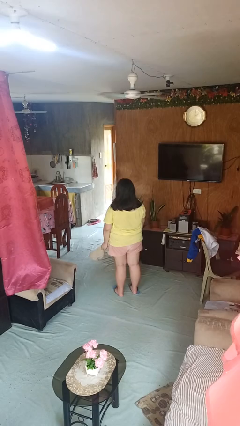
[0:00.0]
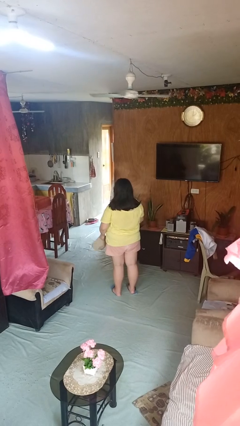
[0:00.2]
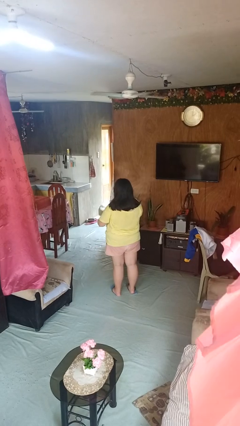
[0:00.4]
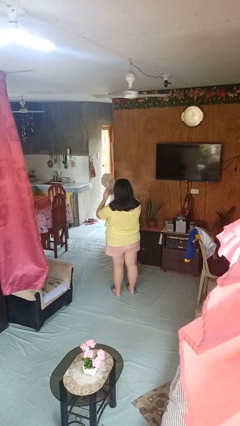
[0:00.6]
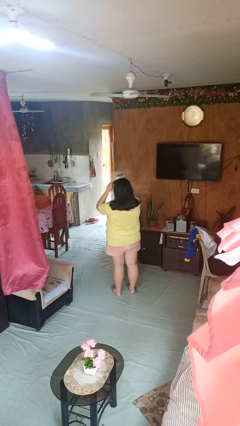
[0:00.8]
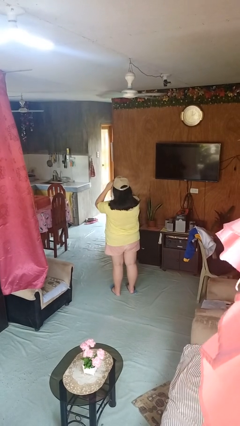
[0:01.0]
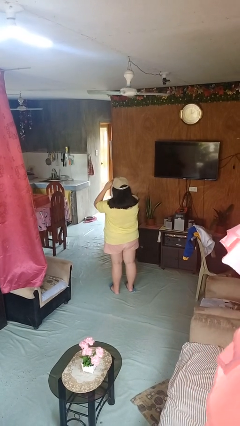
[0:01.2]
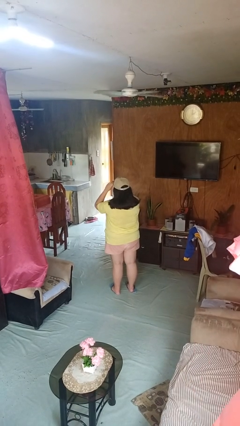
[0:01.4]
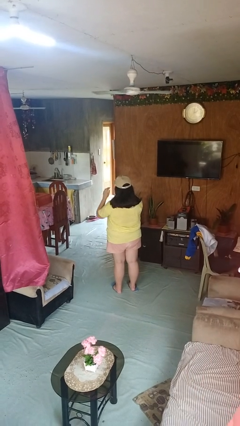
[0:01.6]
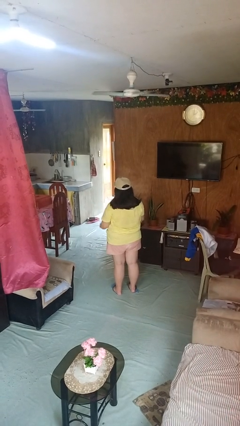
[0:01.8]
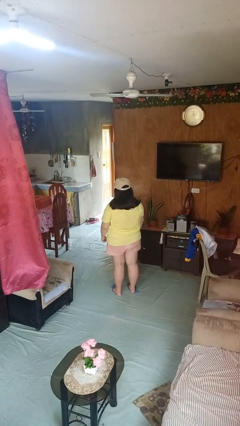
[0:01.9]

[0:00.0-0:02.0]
person puts on hat

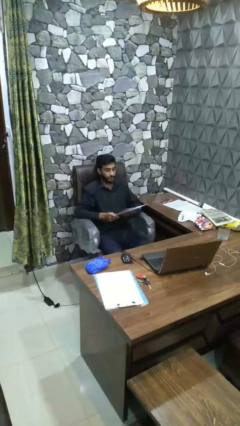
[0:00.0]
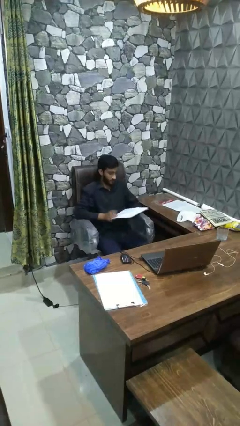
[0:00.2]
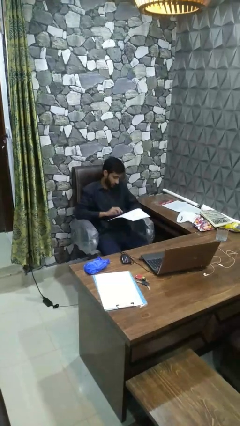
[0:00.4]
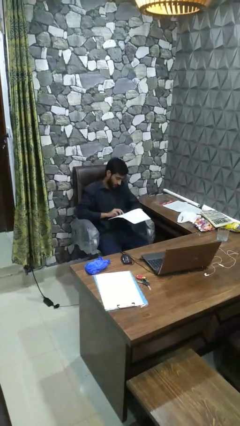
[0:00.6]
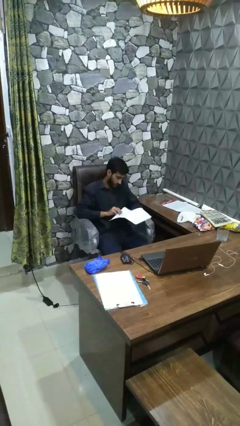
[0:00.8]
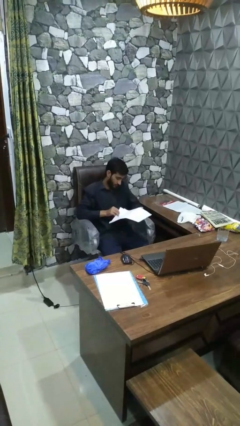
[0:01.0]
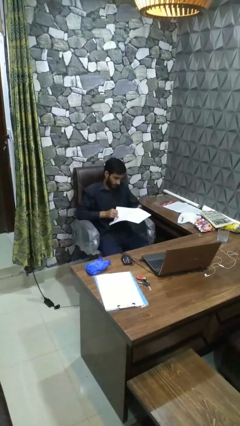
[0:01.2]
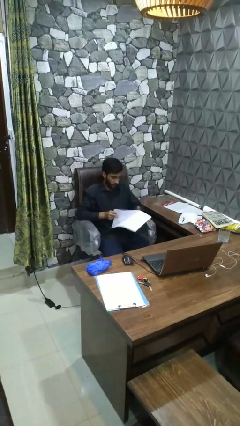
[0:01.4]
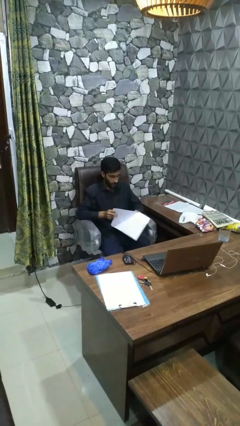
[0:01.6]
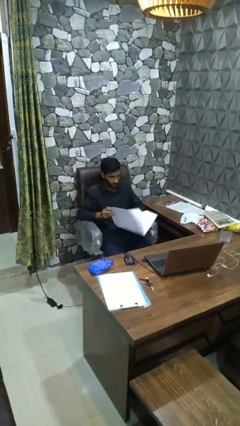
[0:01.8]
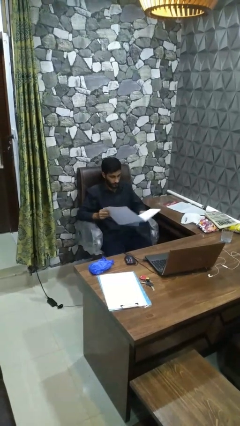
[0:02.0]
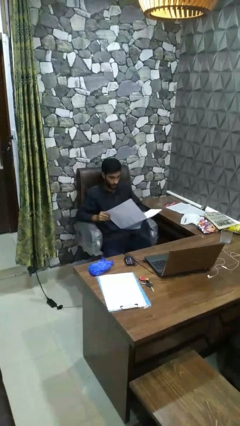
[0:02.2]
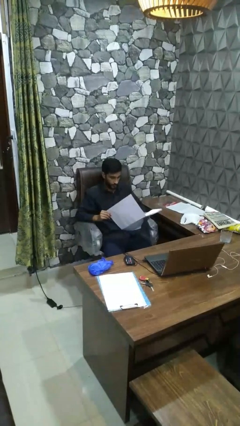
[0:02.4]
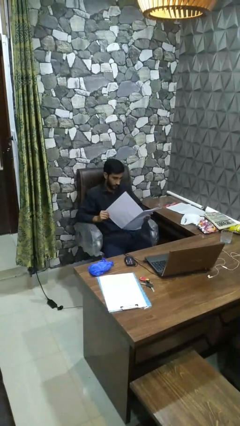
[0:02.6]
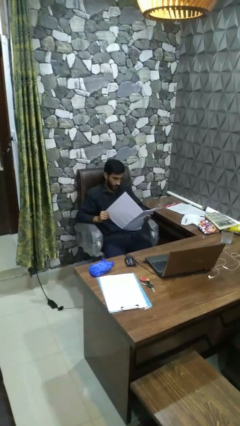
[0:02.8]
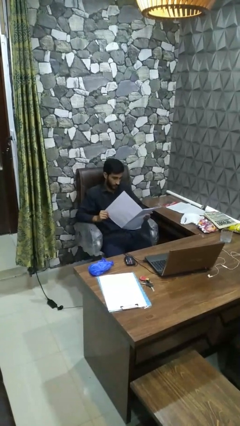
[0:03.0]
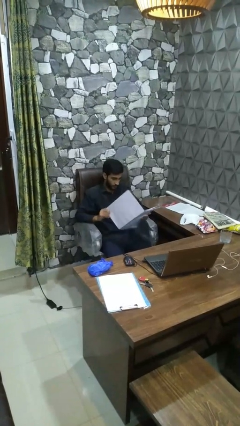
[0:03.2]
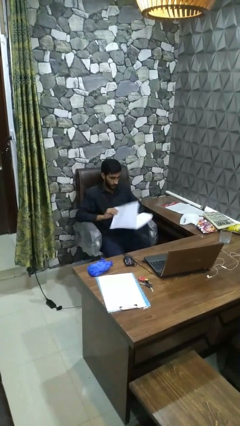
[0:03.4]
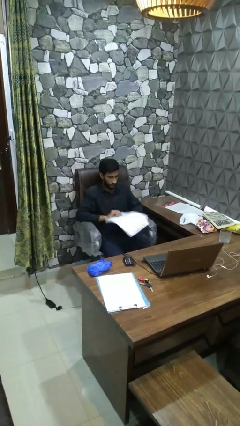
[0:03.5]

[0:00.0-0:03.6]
person reads magazine

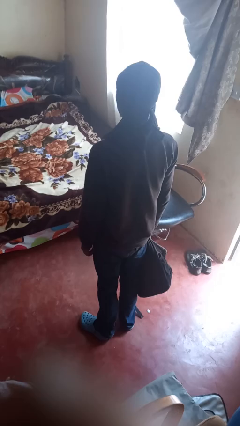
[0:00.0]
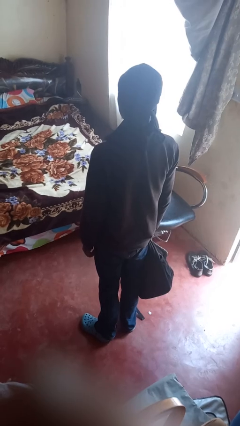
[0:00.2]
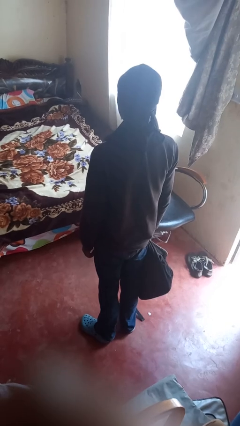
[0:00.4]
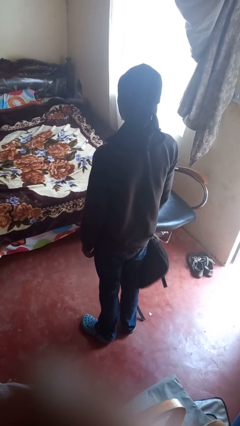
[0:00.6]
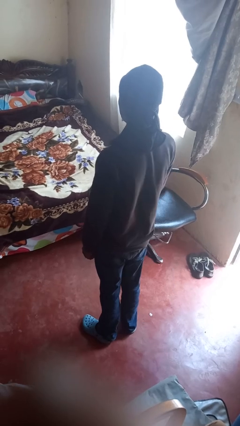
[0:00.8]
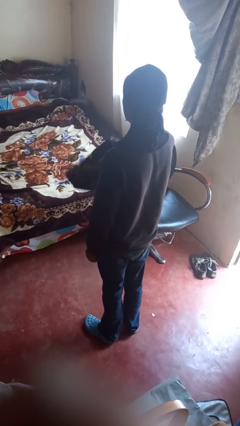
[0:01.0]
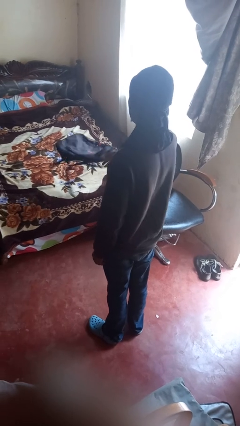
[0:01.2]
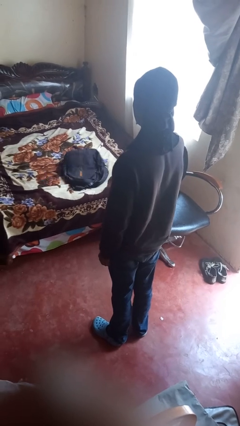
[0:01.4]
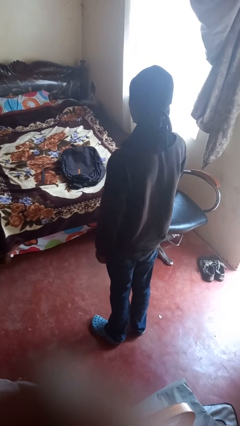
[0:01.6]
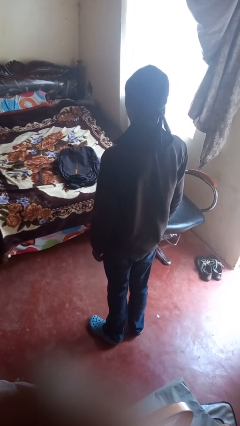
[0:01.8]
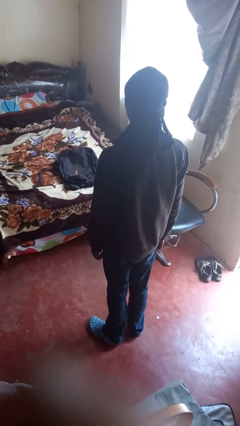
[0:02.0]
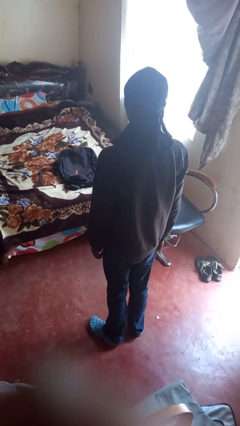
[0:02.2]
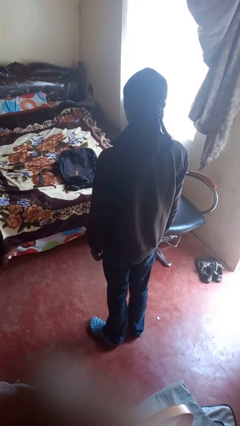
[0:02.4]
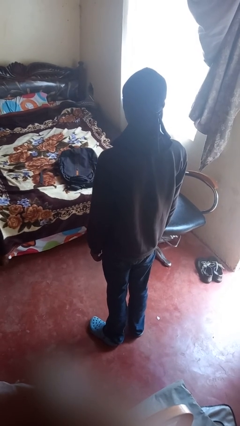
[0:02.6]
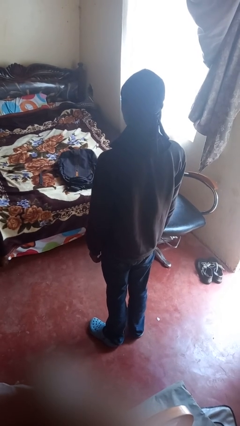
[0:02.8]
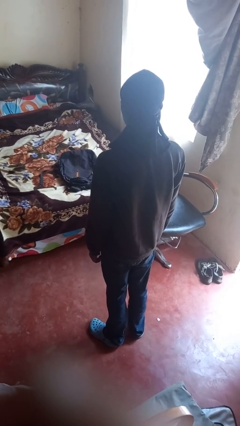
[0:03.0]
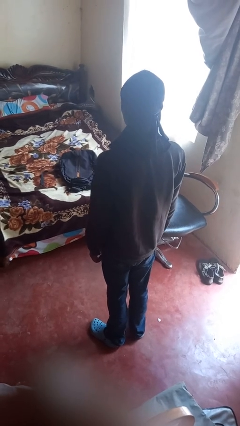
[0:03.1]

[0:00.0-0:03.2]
person throws object on bed

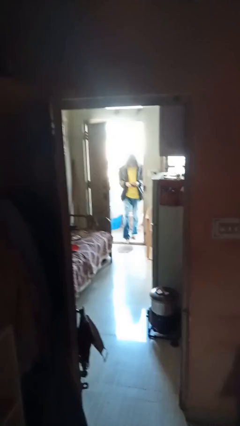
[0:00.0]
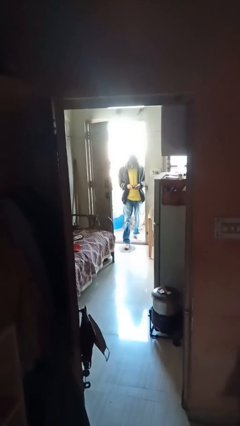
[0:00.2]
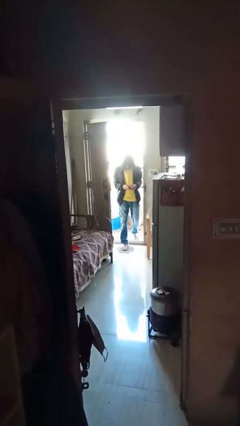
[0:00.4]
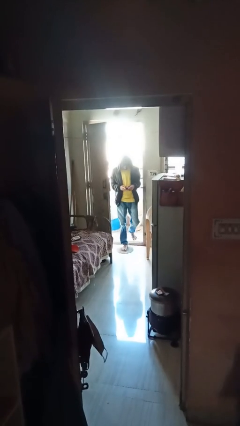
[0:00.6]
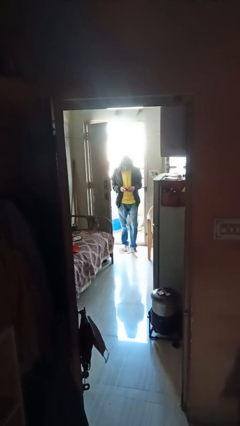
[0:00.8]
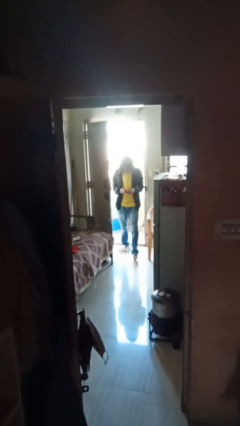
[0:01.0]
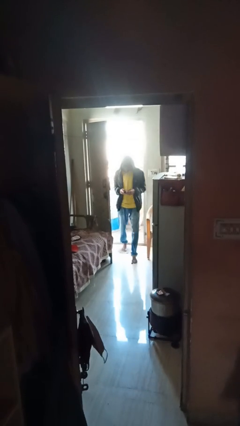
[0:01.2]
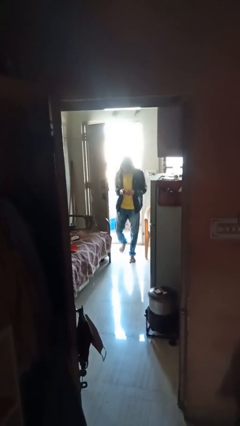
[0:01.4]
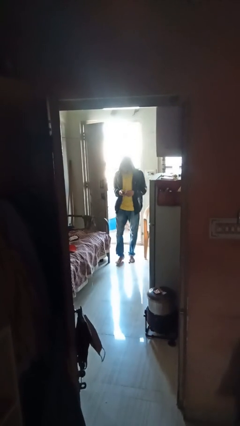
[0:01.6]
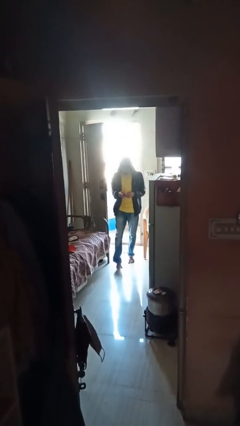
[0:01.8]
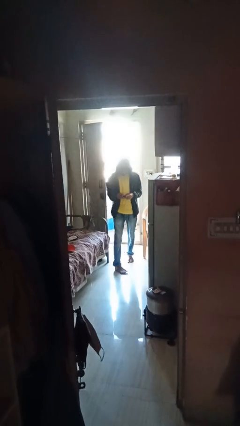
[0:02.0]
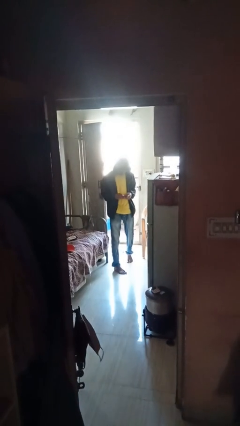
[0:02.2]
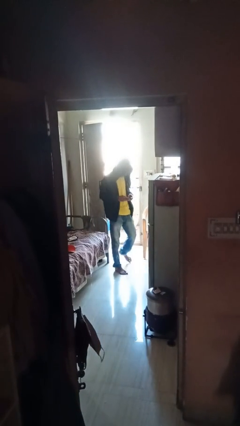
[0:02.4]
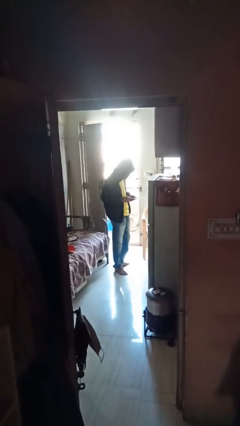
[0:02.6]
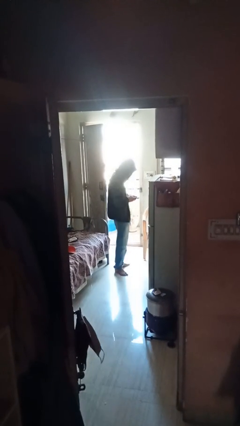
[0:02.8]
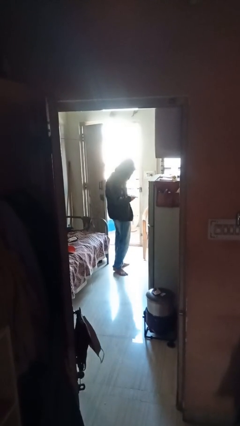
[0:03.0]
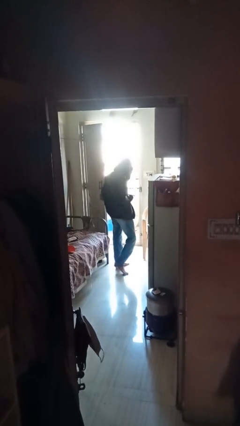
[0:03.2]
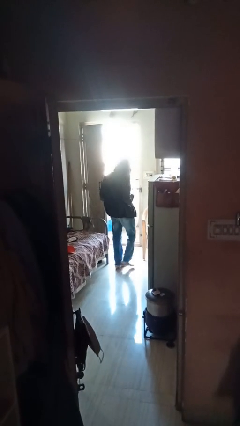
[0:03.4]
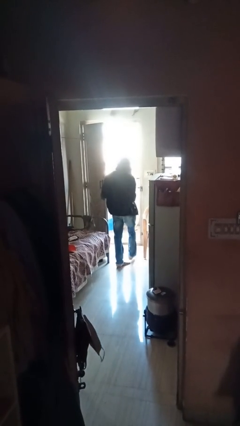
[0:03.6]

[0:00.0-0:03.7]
person enters scene through structure

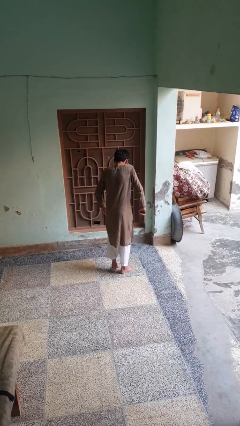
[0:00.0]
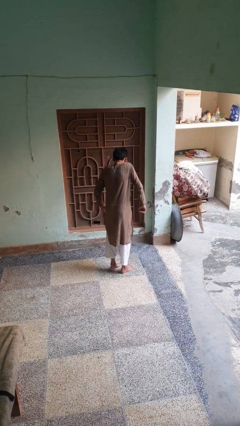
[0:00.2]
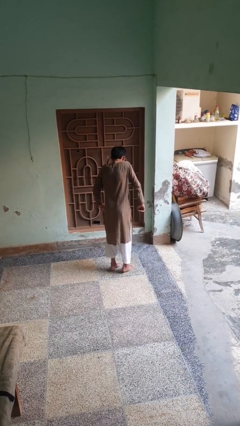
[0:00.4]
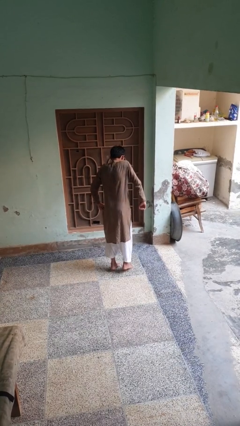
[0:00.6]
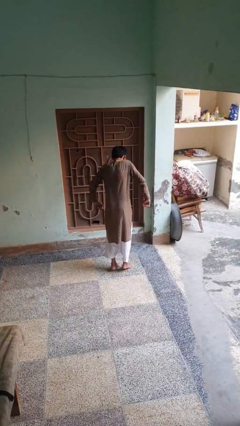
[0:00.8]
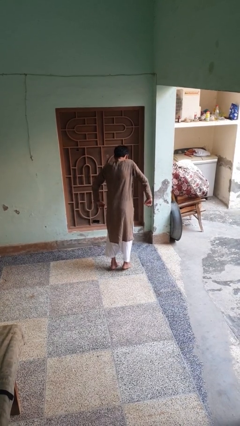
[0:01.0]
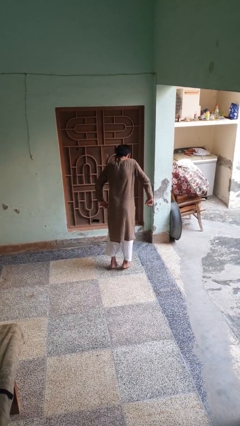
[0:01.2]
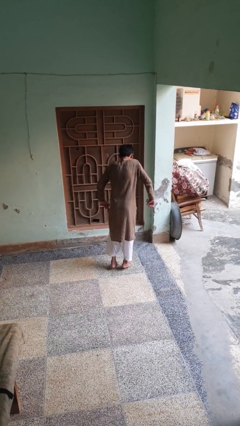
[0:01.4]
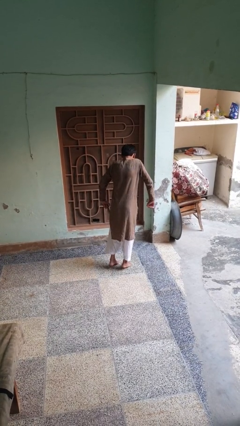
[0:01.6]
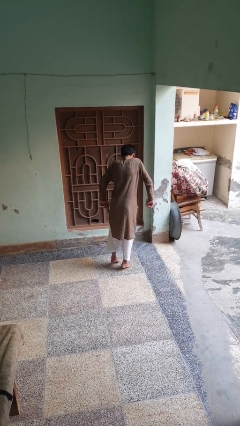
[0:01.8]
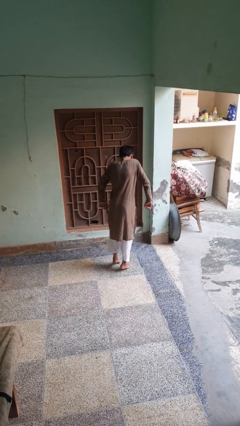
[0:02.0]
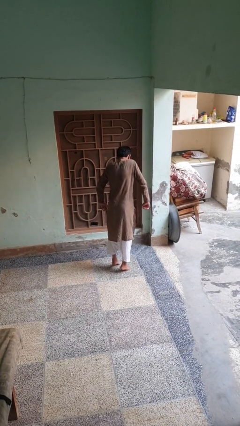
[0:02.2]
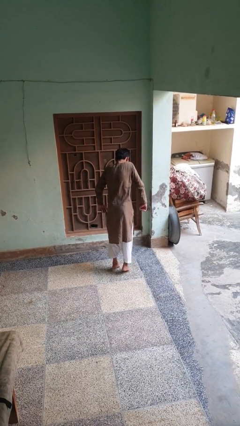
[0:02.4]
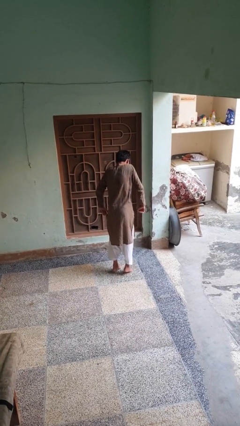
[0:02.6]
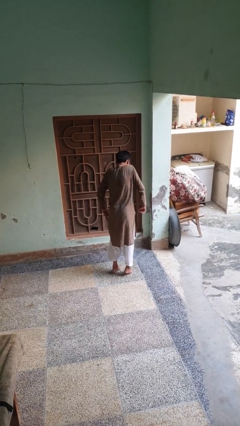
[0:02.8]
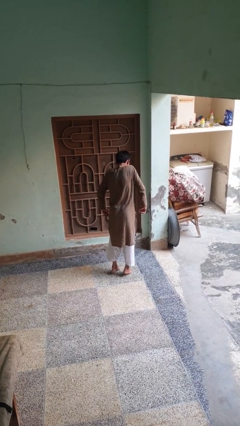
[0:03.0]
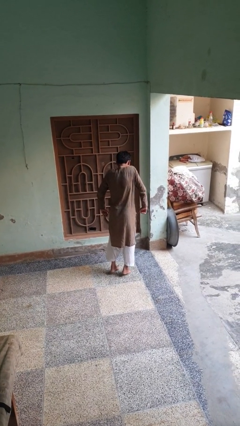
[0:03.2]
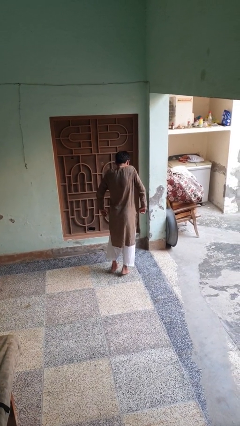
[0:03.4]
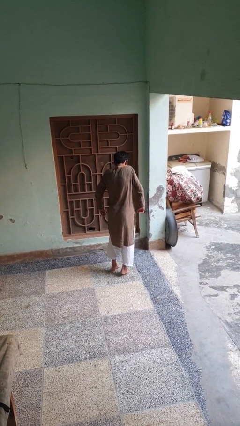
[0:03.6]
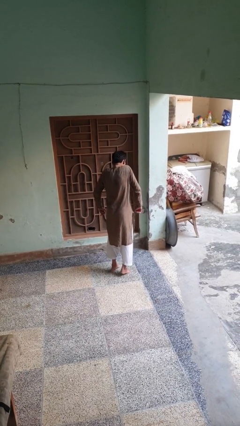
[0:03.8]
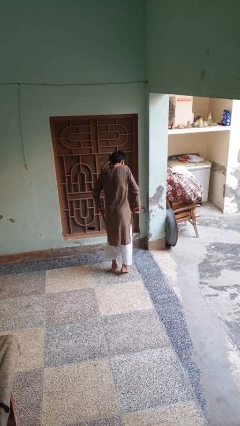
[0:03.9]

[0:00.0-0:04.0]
person walks tiptoe

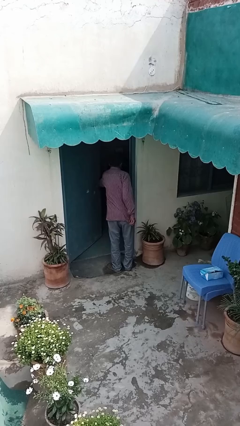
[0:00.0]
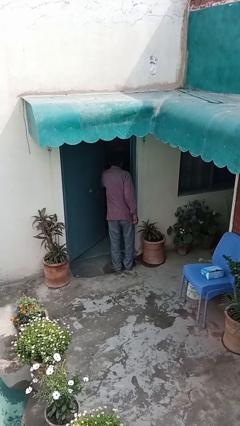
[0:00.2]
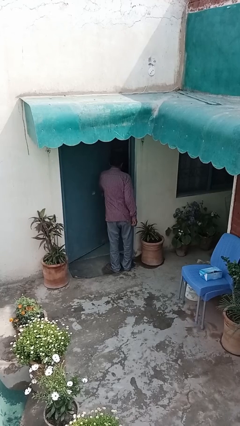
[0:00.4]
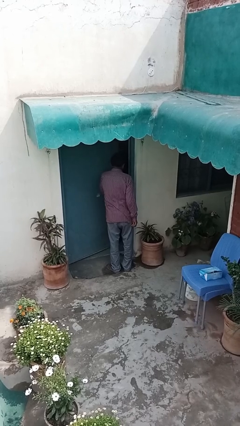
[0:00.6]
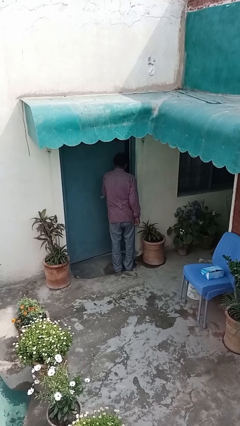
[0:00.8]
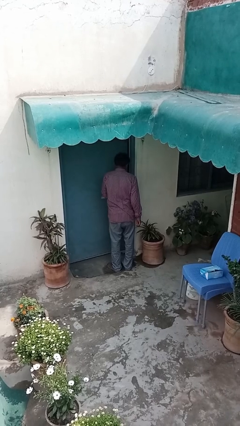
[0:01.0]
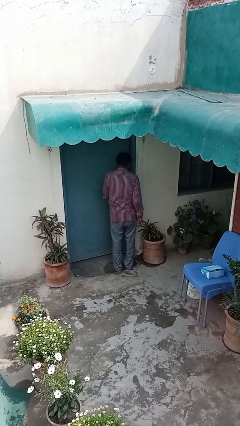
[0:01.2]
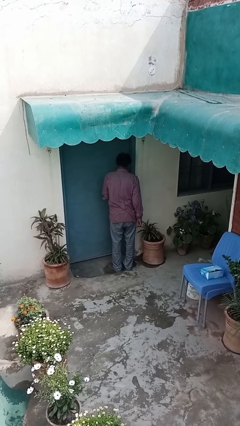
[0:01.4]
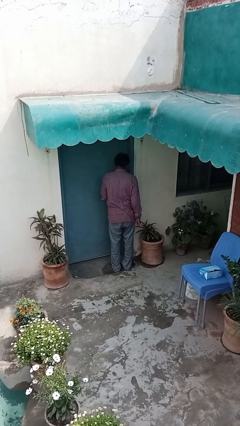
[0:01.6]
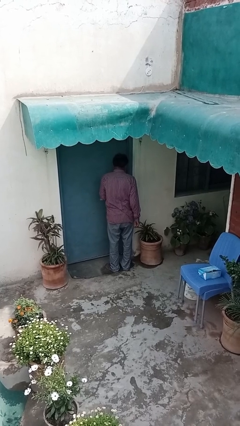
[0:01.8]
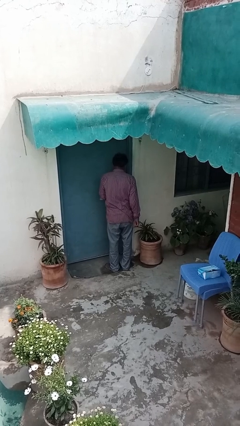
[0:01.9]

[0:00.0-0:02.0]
person closes facility door
